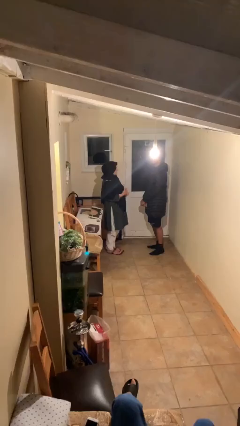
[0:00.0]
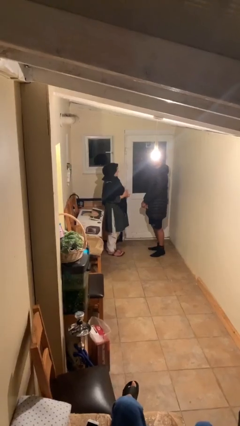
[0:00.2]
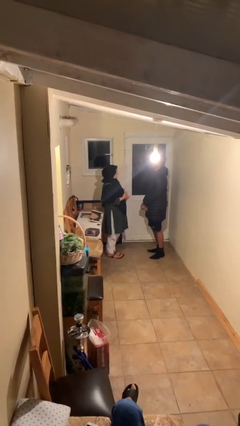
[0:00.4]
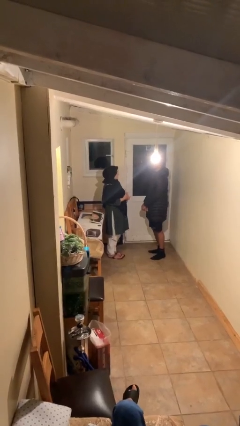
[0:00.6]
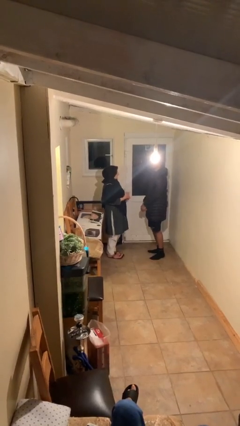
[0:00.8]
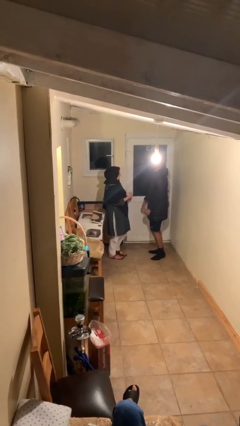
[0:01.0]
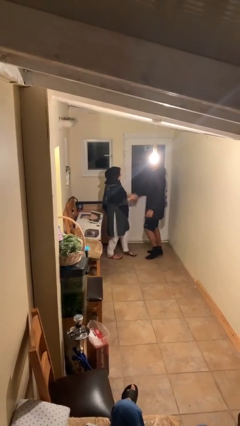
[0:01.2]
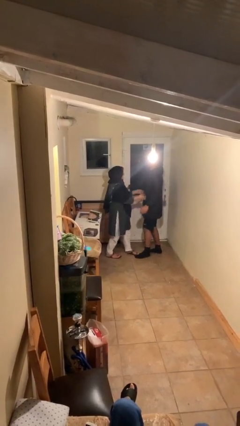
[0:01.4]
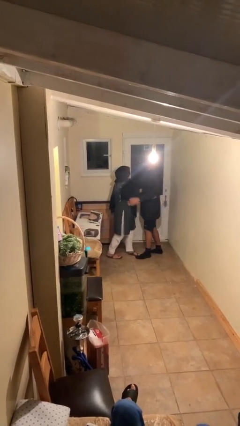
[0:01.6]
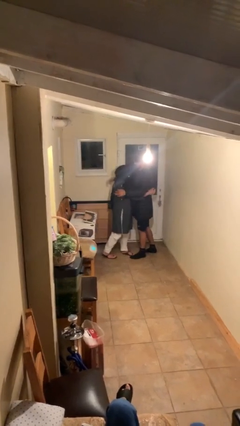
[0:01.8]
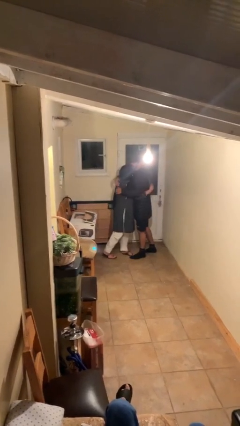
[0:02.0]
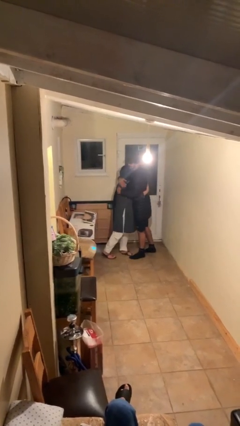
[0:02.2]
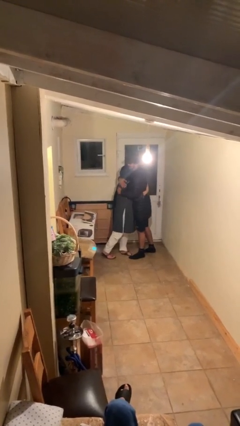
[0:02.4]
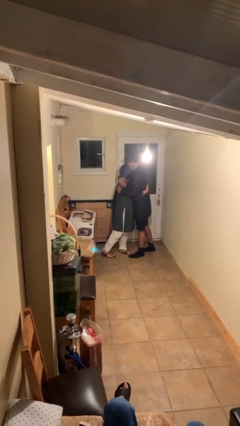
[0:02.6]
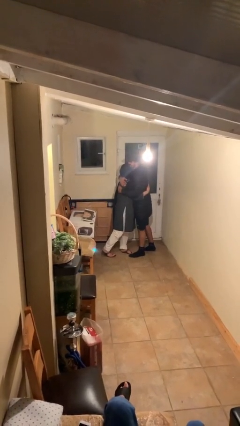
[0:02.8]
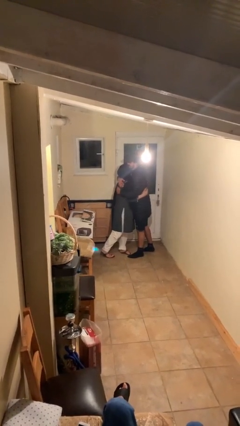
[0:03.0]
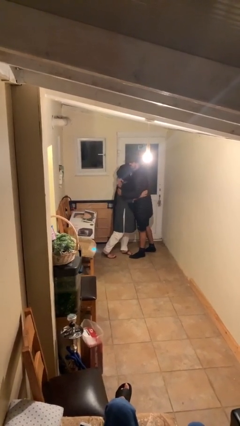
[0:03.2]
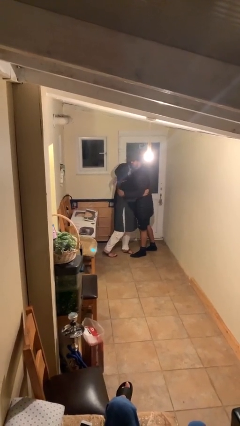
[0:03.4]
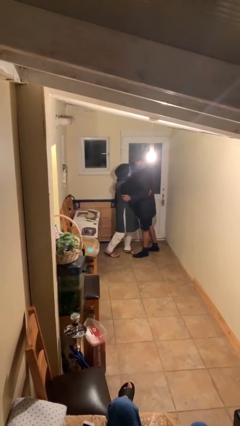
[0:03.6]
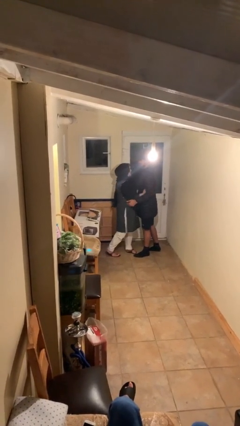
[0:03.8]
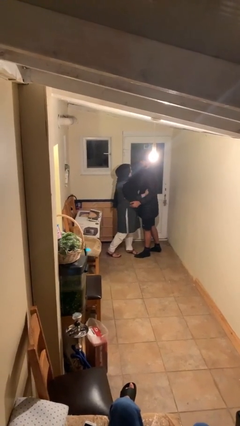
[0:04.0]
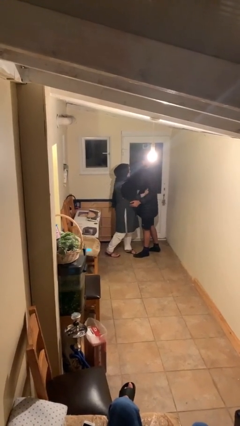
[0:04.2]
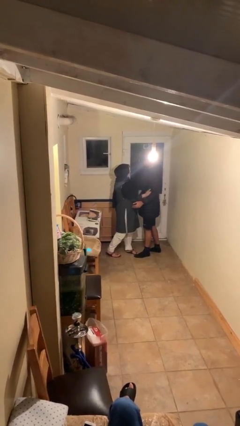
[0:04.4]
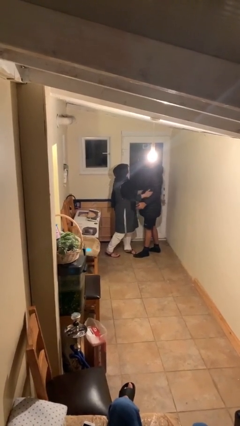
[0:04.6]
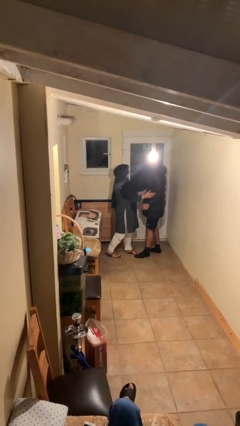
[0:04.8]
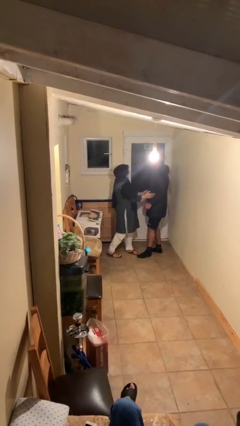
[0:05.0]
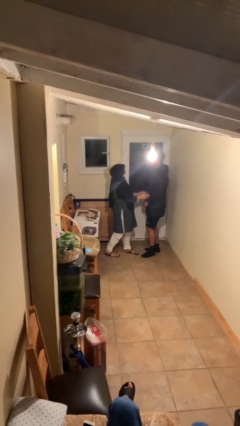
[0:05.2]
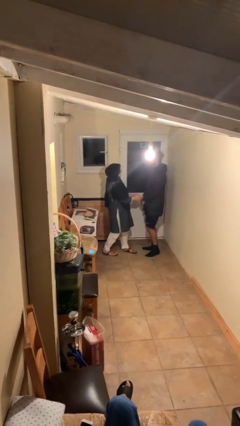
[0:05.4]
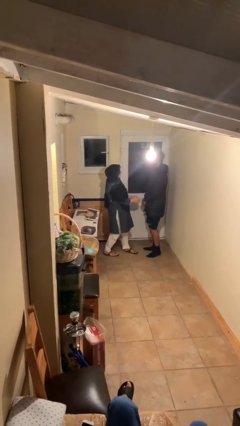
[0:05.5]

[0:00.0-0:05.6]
person embraces person

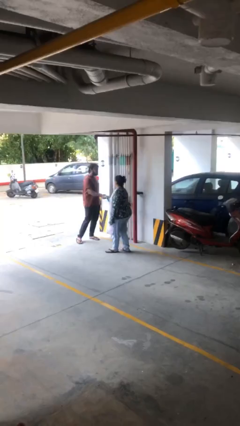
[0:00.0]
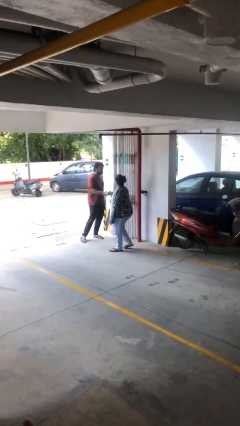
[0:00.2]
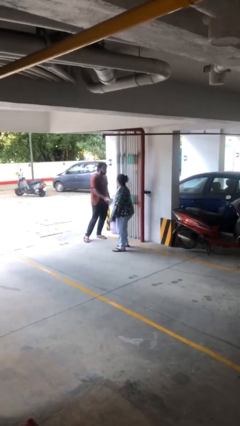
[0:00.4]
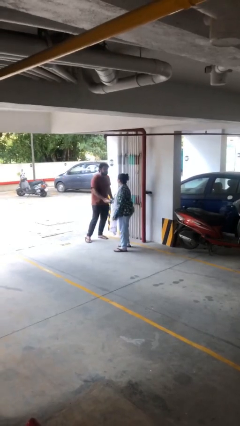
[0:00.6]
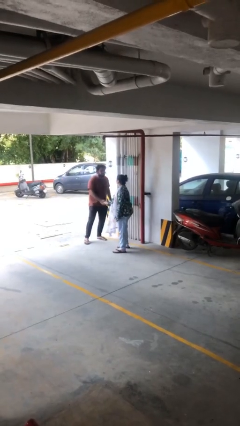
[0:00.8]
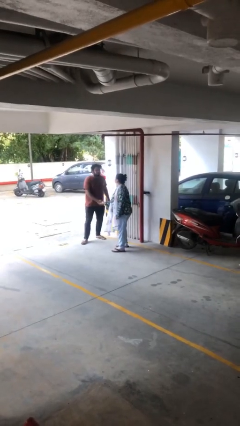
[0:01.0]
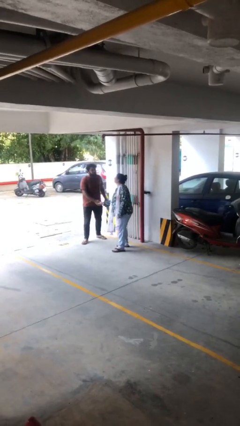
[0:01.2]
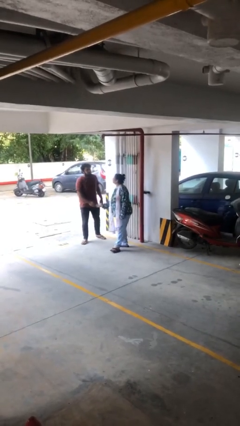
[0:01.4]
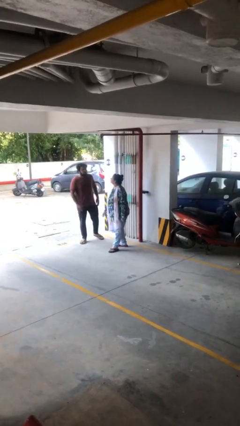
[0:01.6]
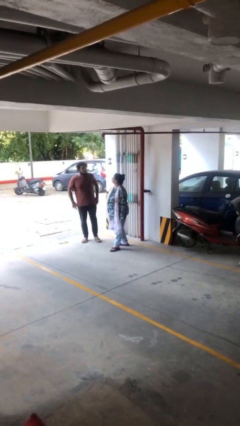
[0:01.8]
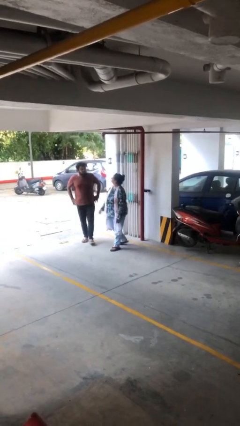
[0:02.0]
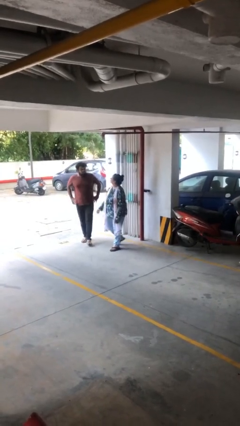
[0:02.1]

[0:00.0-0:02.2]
person shakes hand

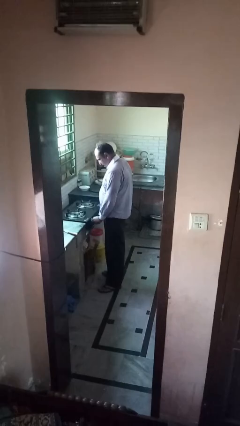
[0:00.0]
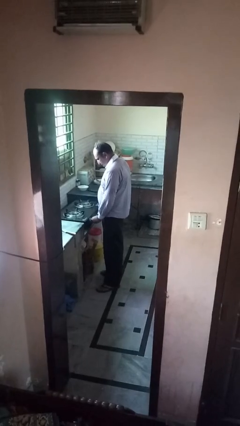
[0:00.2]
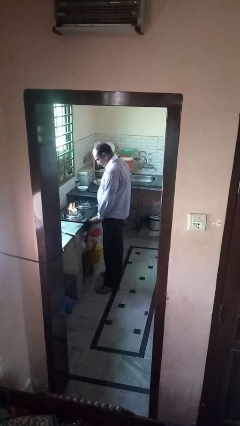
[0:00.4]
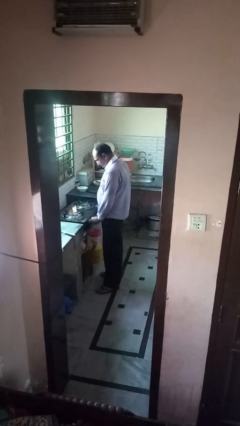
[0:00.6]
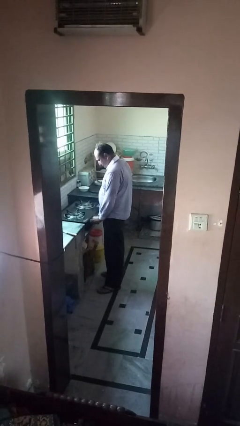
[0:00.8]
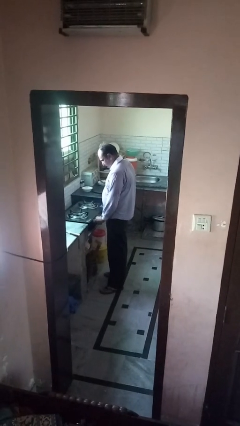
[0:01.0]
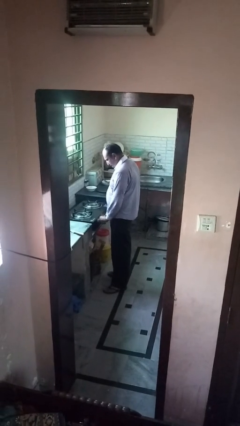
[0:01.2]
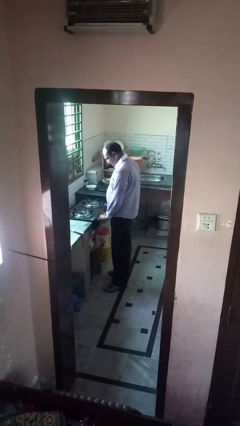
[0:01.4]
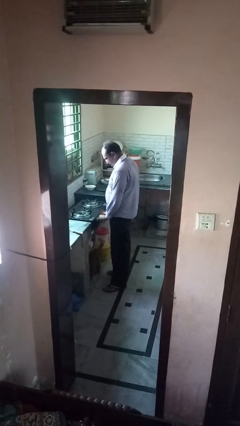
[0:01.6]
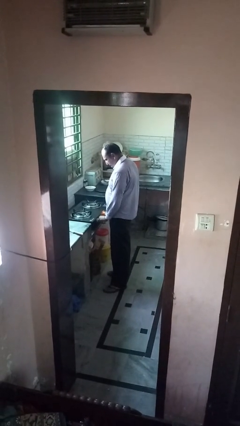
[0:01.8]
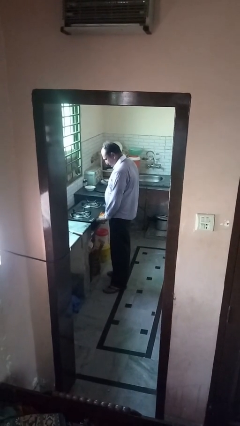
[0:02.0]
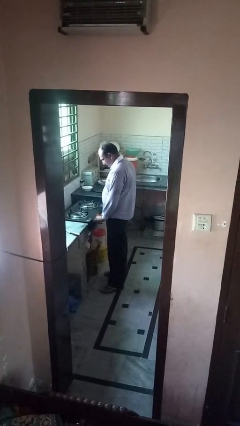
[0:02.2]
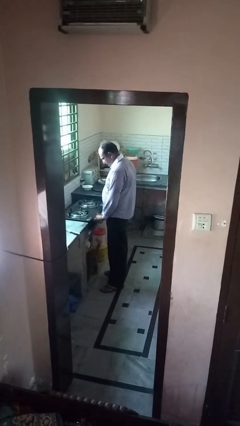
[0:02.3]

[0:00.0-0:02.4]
person turns off stovetop

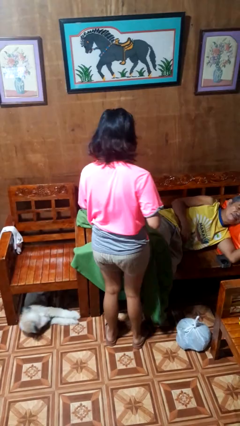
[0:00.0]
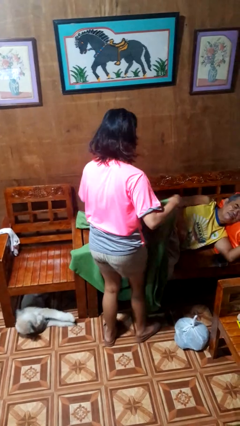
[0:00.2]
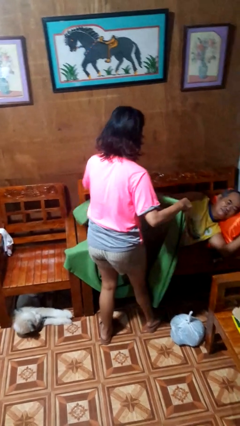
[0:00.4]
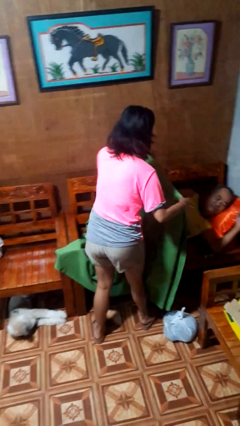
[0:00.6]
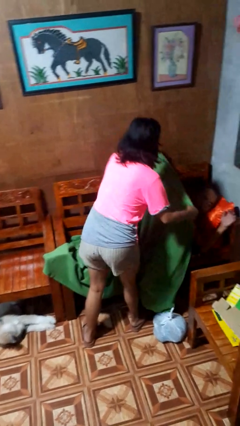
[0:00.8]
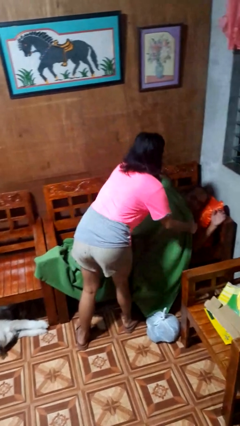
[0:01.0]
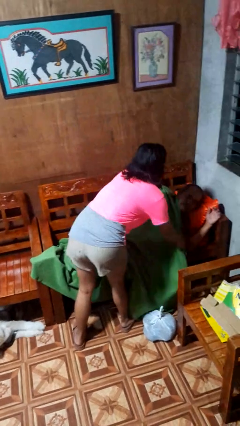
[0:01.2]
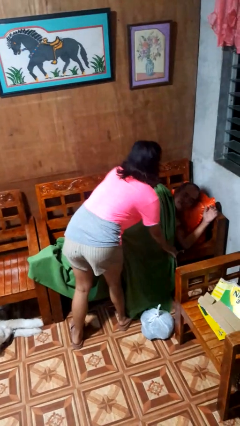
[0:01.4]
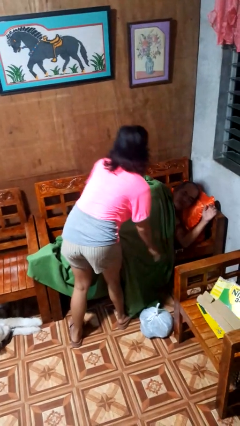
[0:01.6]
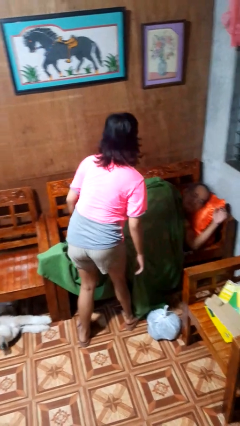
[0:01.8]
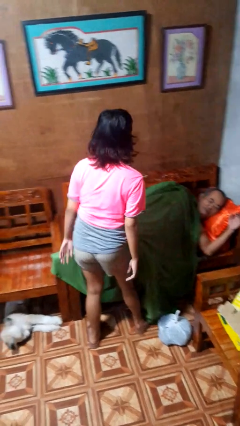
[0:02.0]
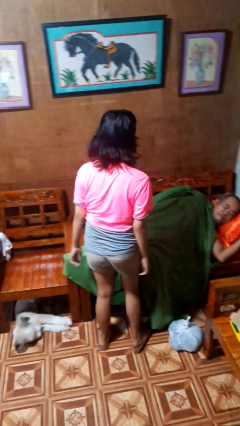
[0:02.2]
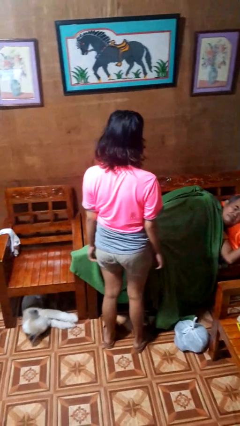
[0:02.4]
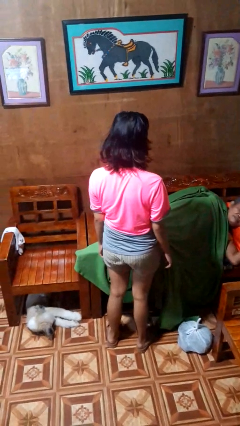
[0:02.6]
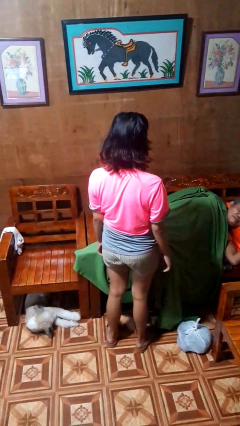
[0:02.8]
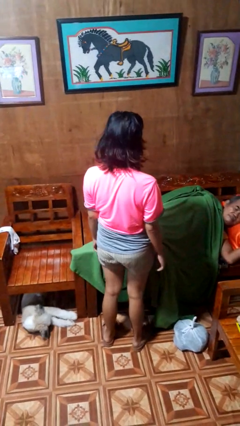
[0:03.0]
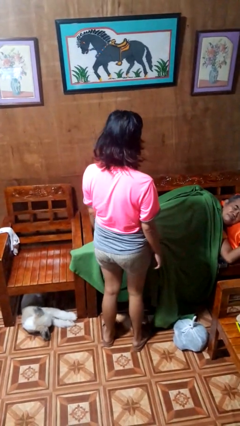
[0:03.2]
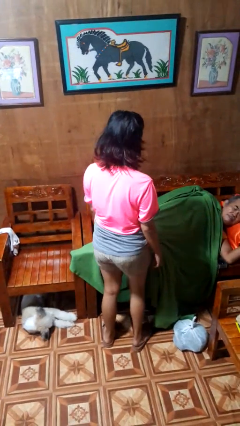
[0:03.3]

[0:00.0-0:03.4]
person covers friend with blanket

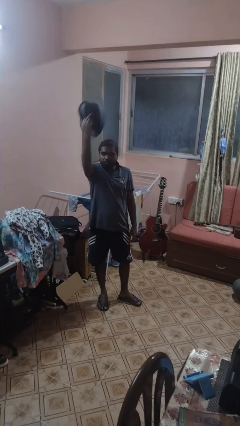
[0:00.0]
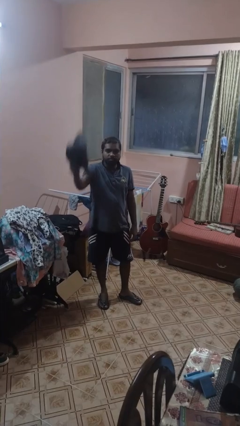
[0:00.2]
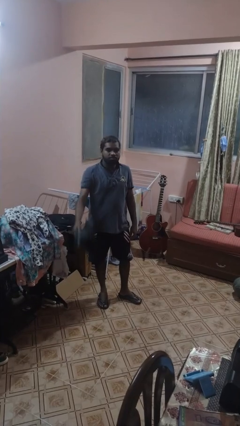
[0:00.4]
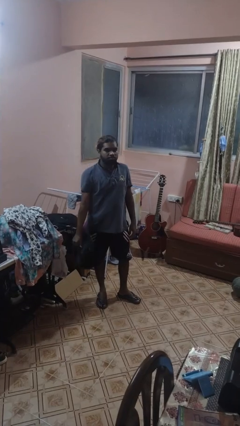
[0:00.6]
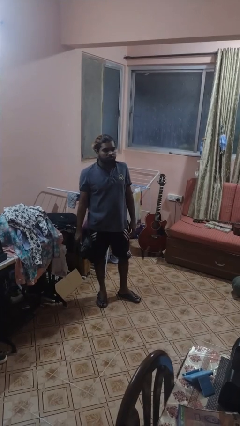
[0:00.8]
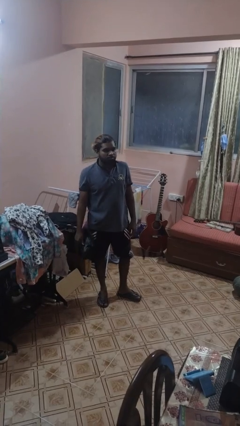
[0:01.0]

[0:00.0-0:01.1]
person takes off hat

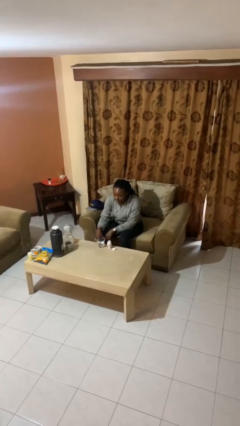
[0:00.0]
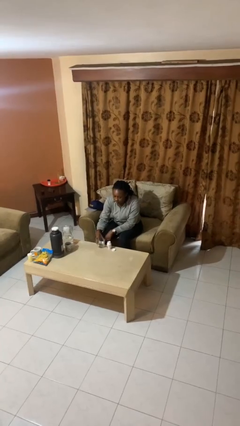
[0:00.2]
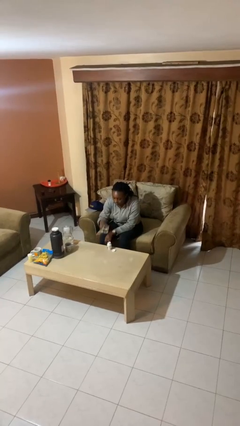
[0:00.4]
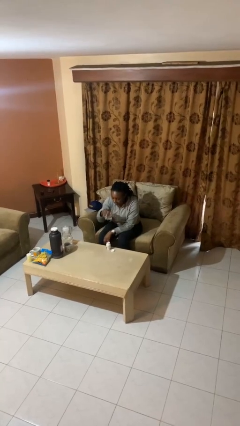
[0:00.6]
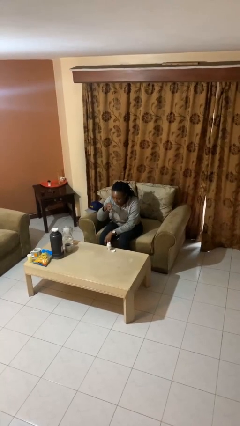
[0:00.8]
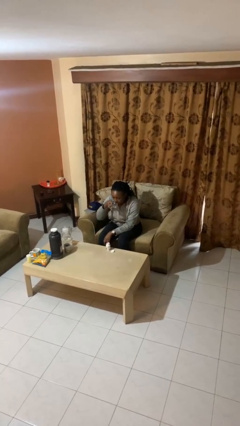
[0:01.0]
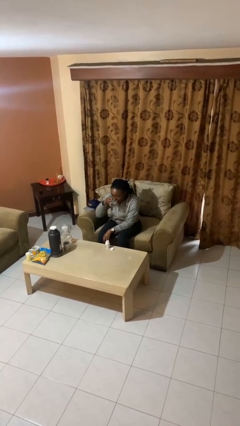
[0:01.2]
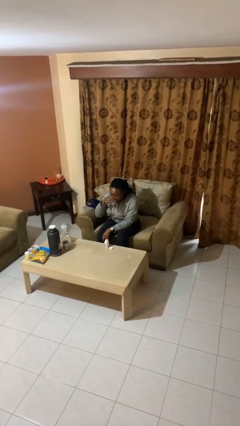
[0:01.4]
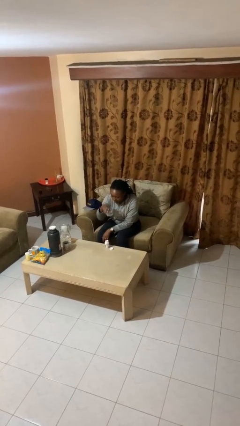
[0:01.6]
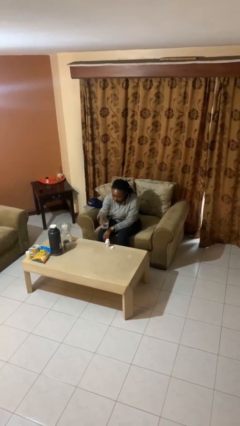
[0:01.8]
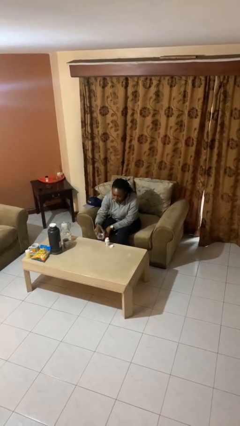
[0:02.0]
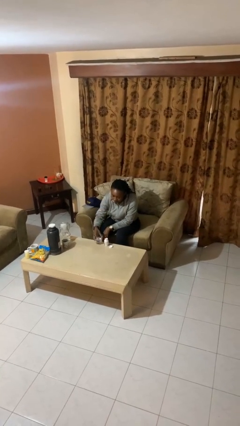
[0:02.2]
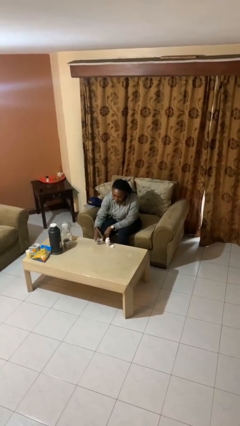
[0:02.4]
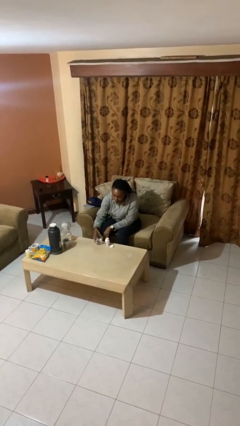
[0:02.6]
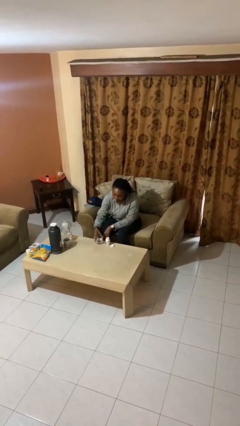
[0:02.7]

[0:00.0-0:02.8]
person drinks from cup
